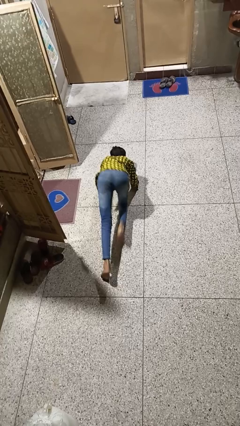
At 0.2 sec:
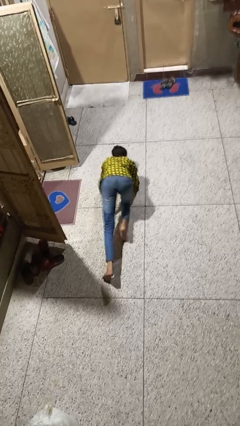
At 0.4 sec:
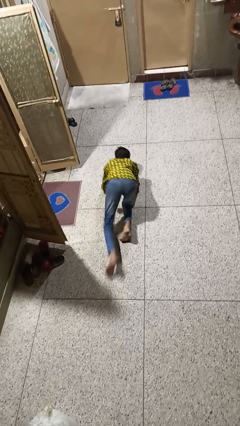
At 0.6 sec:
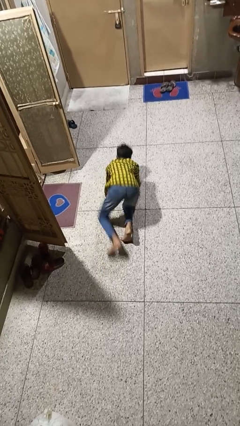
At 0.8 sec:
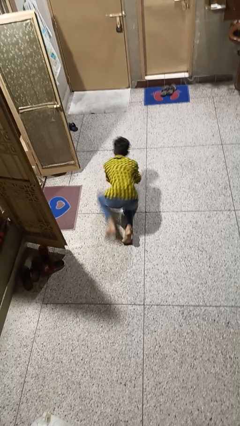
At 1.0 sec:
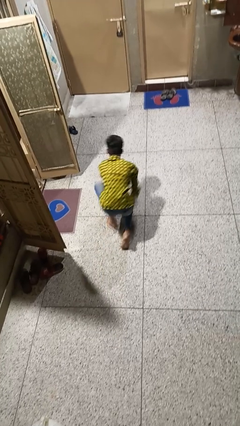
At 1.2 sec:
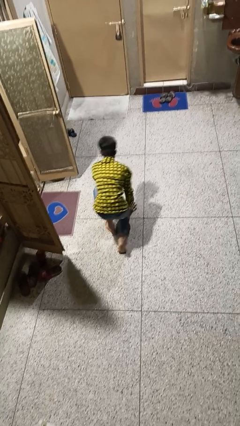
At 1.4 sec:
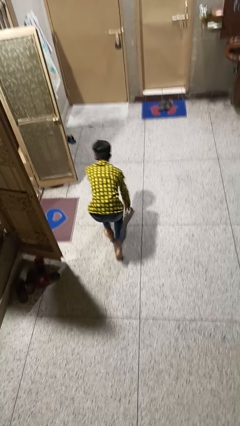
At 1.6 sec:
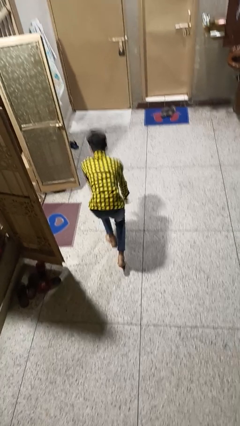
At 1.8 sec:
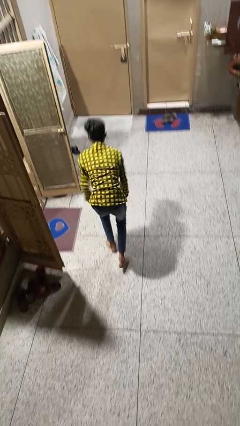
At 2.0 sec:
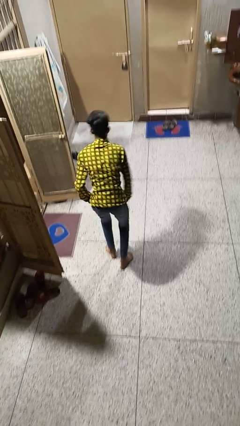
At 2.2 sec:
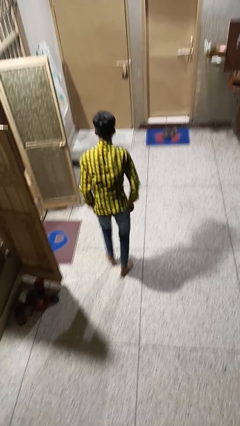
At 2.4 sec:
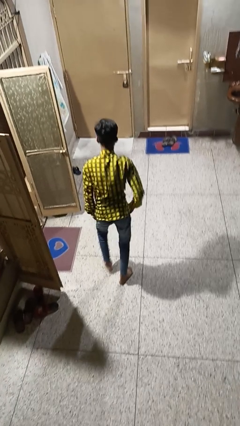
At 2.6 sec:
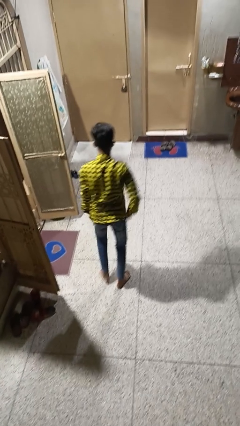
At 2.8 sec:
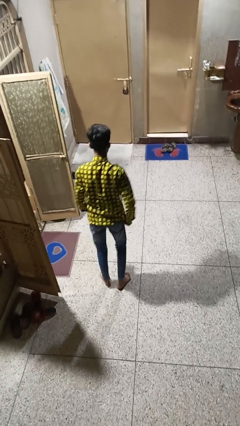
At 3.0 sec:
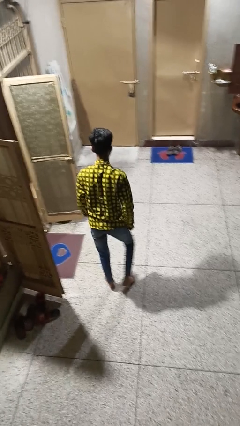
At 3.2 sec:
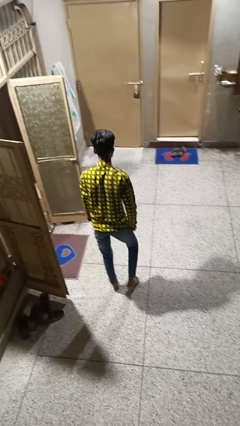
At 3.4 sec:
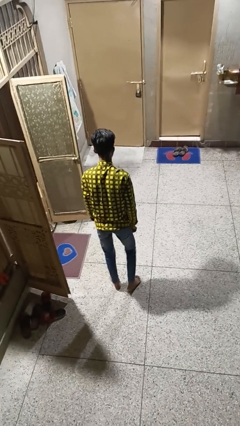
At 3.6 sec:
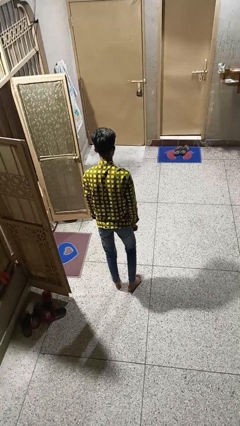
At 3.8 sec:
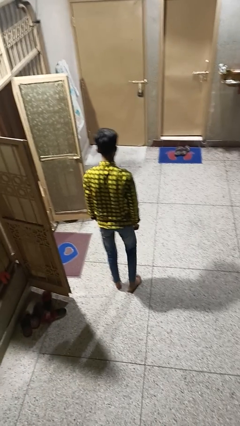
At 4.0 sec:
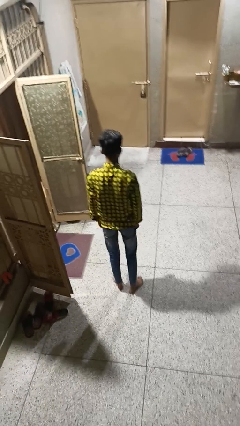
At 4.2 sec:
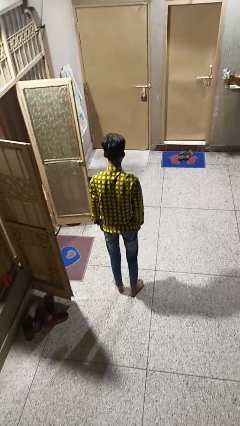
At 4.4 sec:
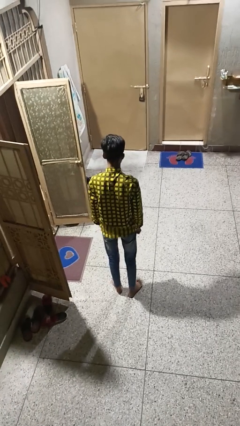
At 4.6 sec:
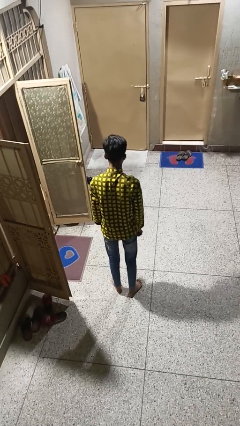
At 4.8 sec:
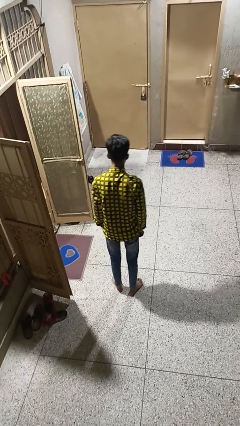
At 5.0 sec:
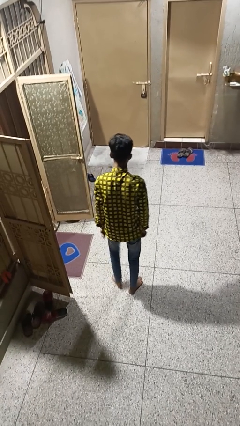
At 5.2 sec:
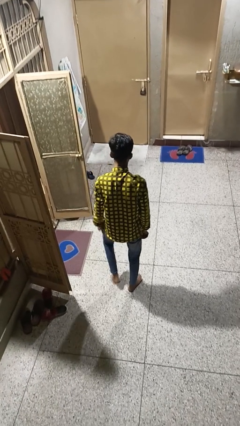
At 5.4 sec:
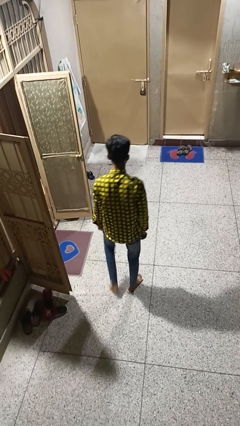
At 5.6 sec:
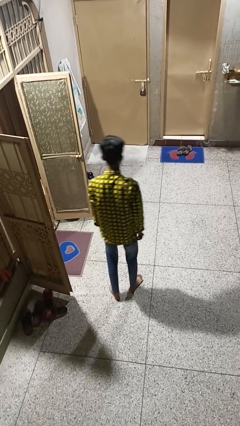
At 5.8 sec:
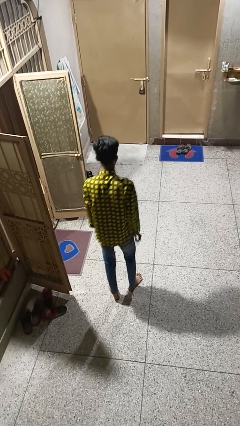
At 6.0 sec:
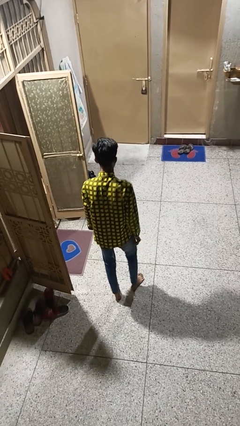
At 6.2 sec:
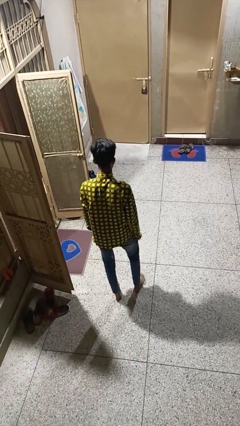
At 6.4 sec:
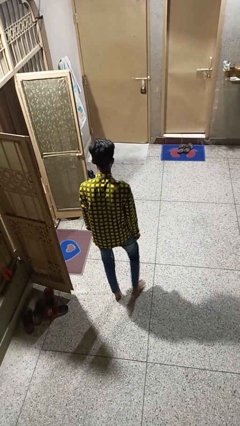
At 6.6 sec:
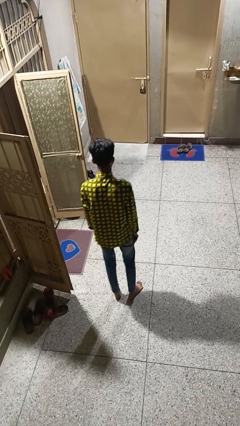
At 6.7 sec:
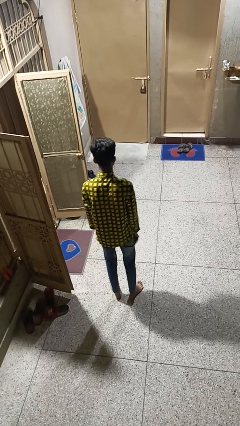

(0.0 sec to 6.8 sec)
person stands up from floor

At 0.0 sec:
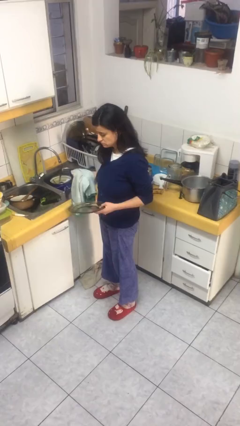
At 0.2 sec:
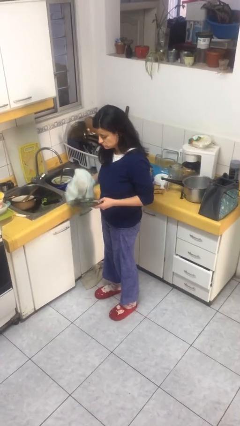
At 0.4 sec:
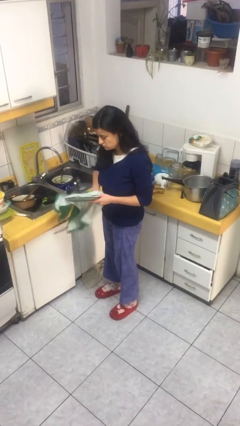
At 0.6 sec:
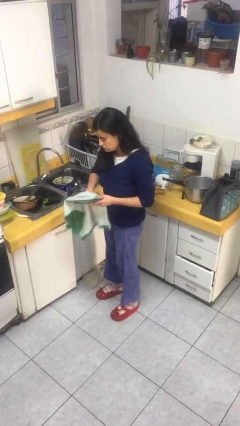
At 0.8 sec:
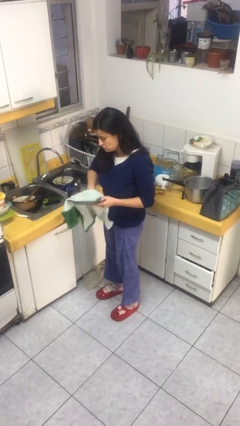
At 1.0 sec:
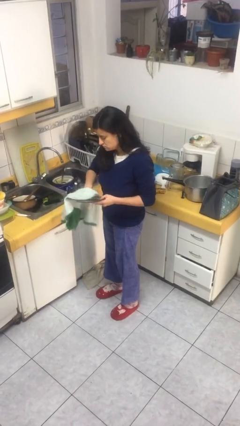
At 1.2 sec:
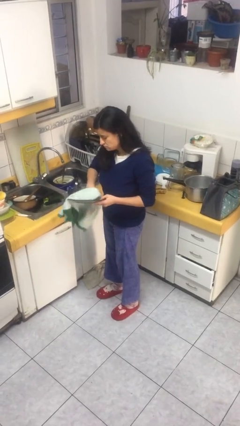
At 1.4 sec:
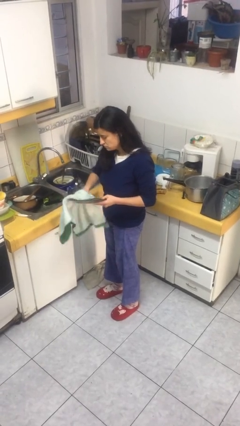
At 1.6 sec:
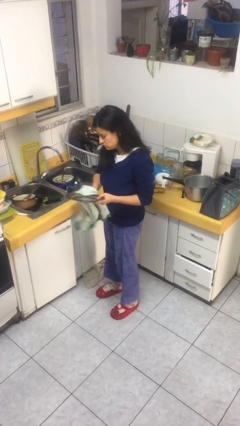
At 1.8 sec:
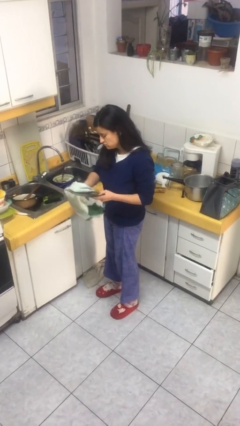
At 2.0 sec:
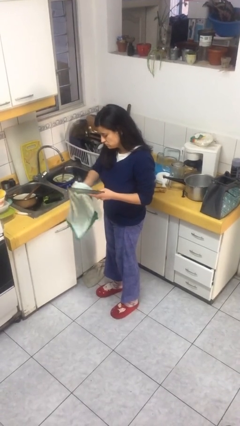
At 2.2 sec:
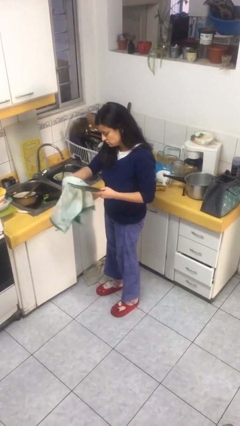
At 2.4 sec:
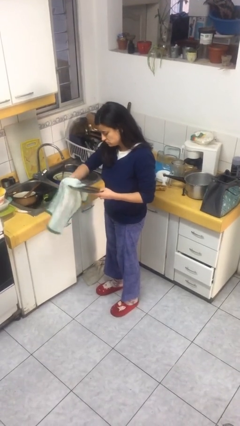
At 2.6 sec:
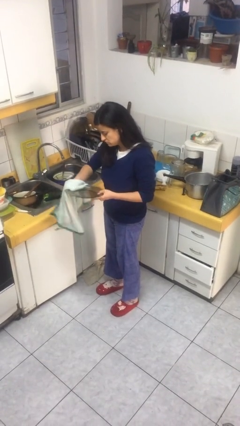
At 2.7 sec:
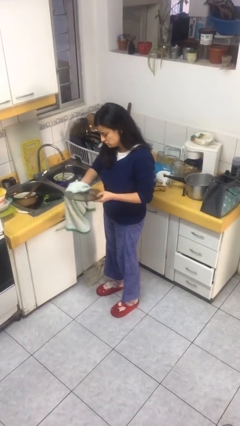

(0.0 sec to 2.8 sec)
person dries dish

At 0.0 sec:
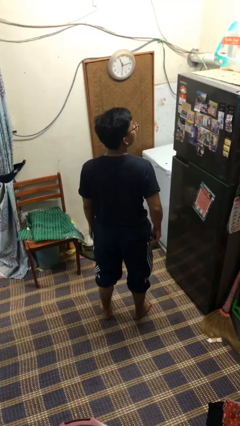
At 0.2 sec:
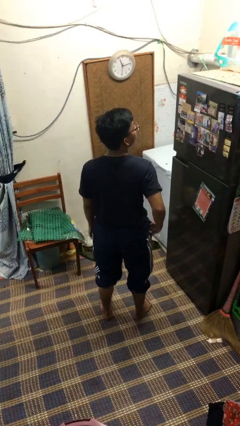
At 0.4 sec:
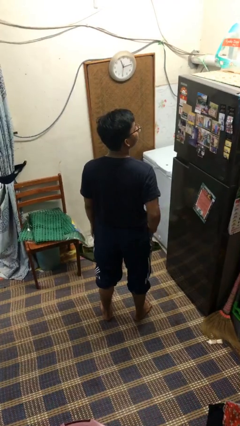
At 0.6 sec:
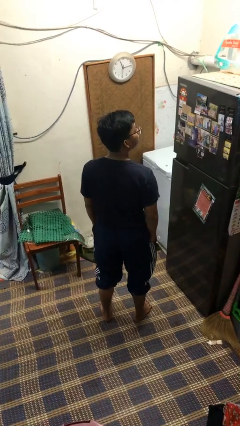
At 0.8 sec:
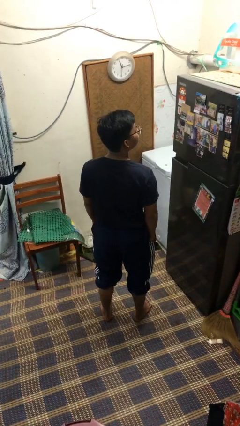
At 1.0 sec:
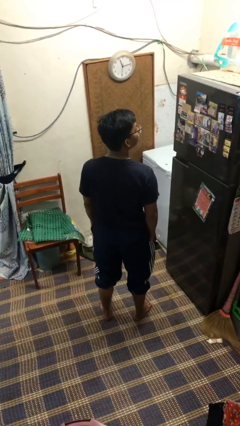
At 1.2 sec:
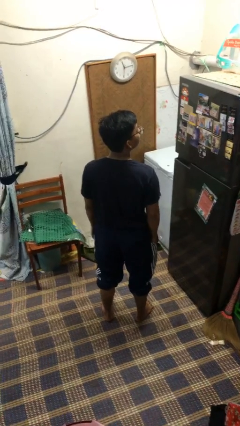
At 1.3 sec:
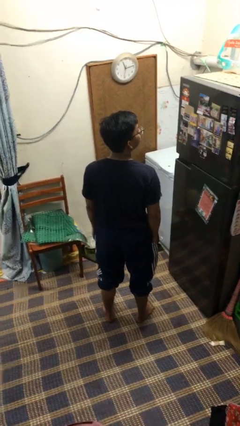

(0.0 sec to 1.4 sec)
person puts hands in back pockets

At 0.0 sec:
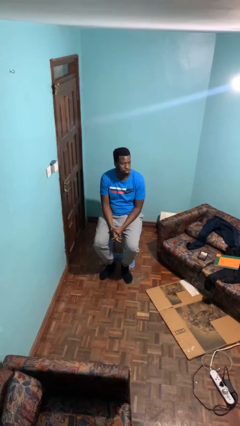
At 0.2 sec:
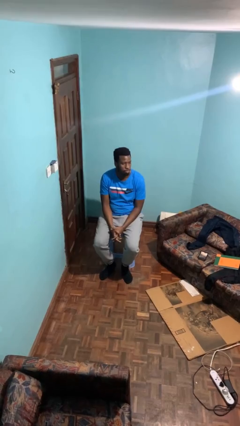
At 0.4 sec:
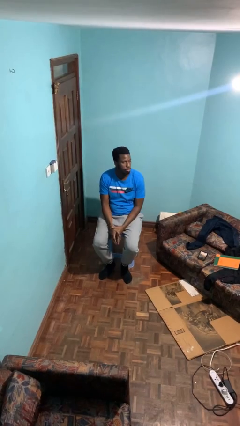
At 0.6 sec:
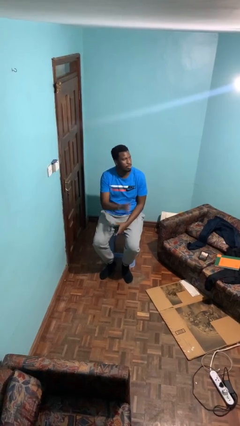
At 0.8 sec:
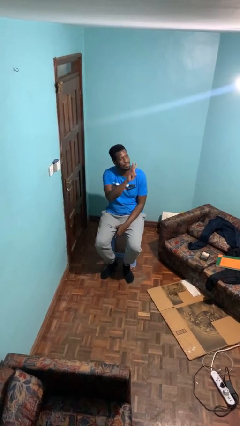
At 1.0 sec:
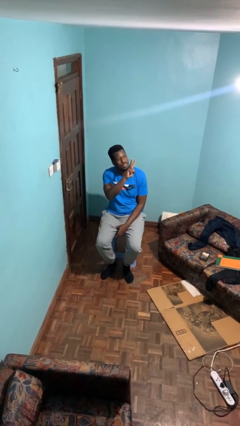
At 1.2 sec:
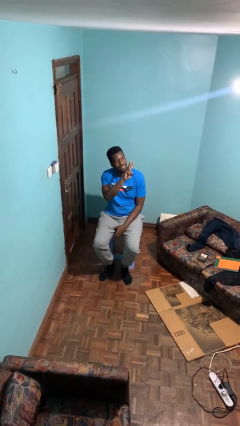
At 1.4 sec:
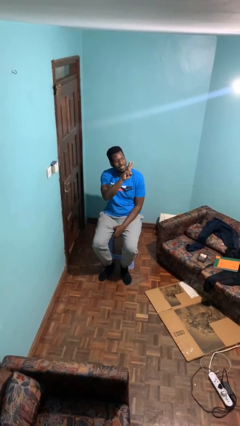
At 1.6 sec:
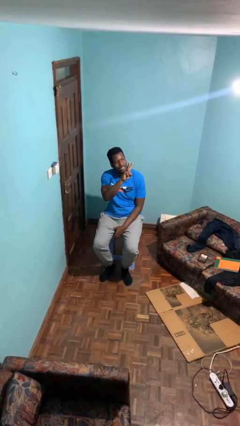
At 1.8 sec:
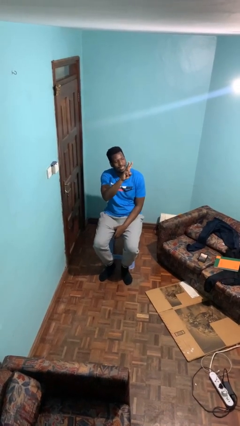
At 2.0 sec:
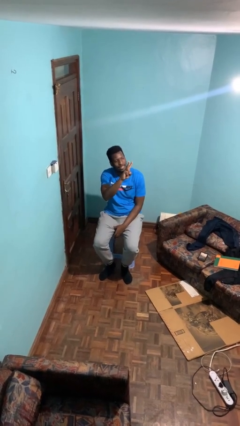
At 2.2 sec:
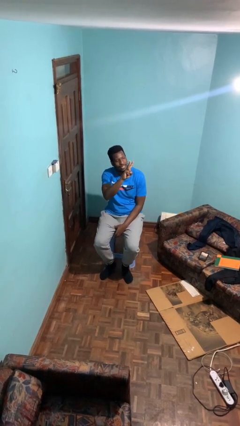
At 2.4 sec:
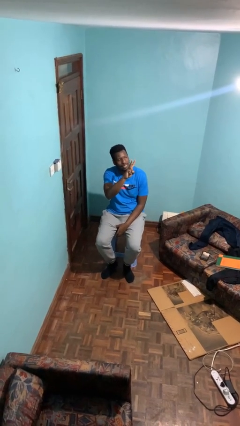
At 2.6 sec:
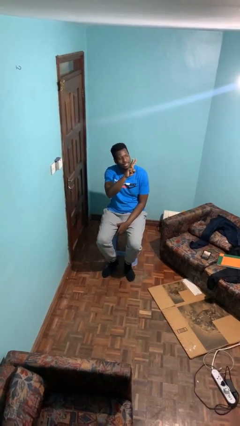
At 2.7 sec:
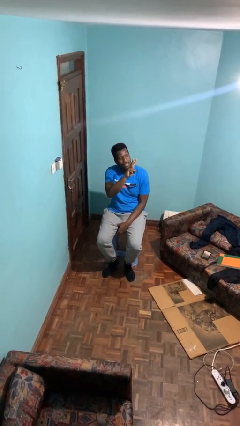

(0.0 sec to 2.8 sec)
person gestures peace

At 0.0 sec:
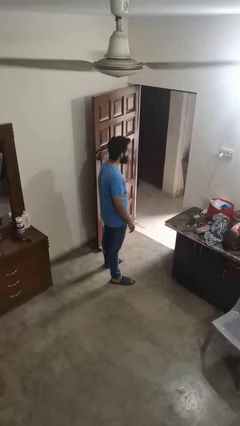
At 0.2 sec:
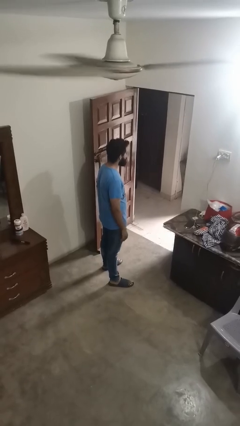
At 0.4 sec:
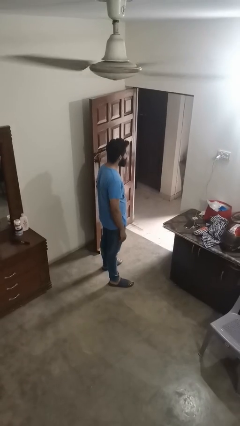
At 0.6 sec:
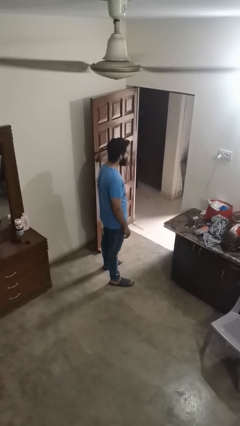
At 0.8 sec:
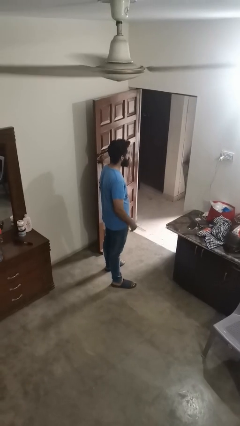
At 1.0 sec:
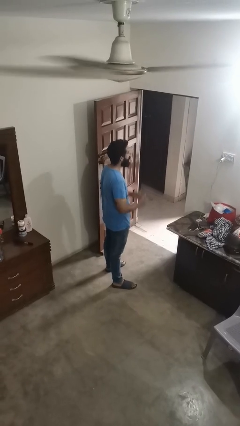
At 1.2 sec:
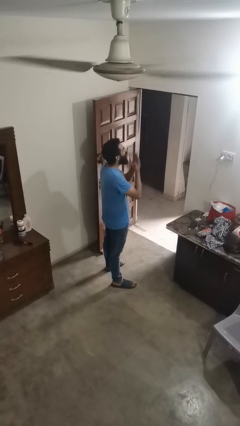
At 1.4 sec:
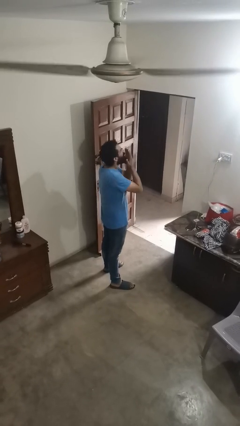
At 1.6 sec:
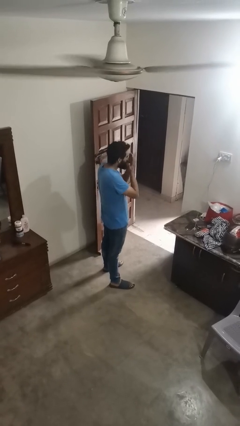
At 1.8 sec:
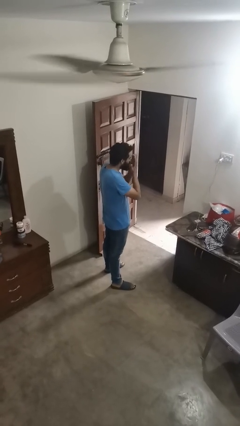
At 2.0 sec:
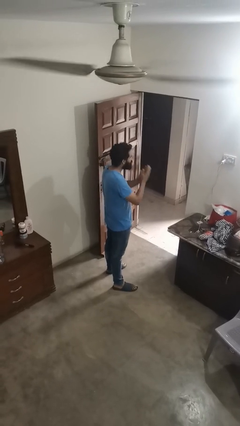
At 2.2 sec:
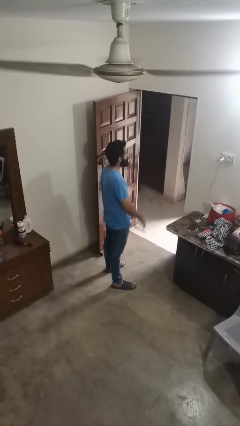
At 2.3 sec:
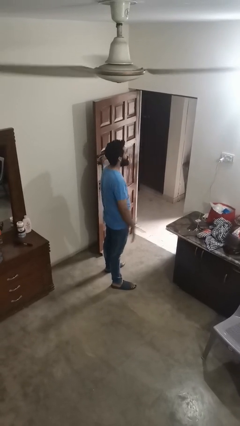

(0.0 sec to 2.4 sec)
person sneezes into hand

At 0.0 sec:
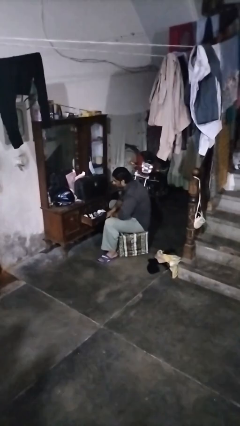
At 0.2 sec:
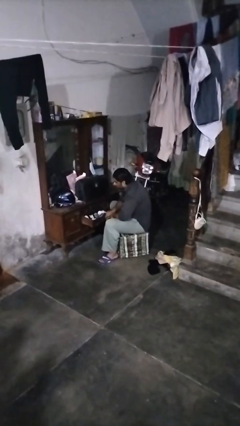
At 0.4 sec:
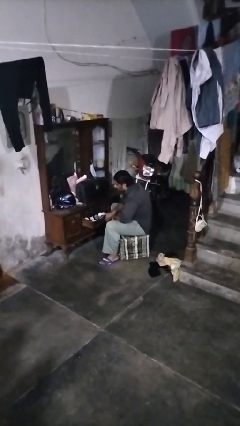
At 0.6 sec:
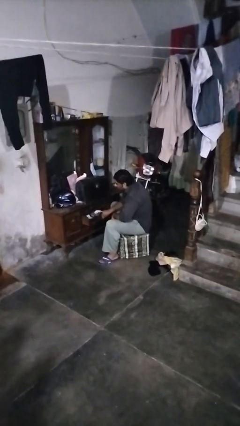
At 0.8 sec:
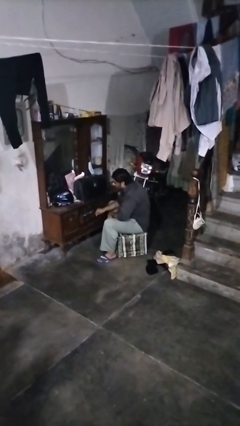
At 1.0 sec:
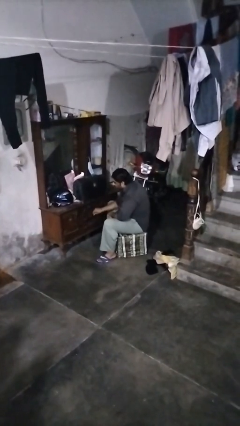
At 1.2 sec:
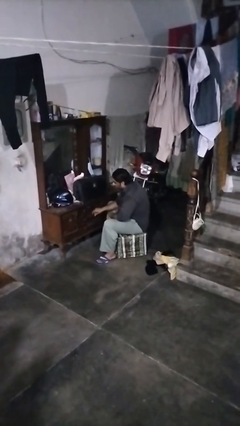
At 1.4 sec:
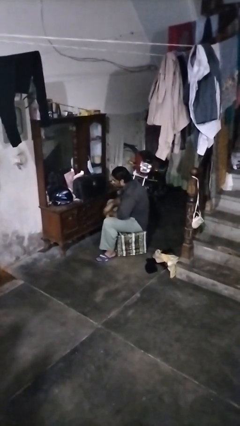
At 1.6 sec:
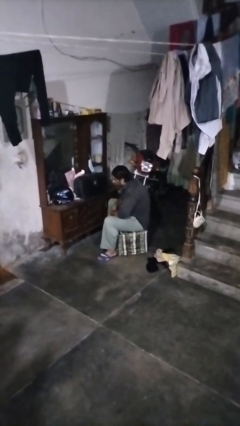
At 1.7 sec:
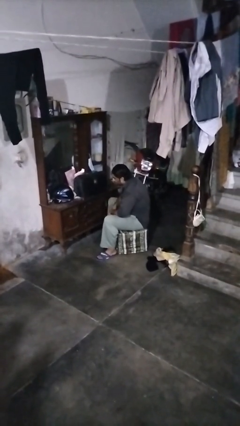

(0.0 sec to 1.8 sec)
person closes dresser drawer
